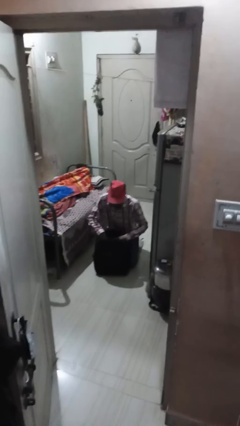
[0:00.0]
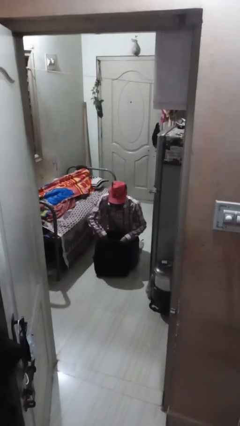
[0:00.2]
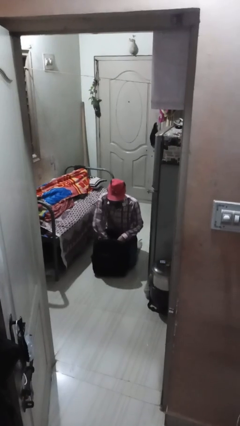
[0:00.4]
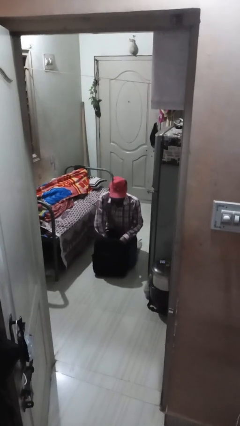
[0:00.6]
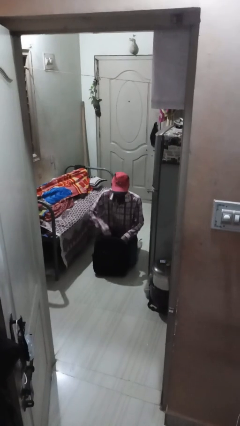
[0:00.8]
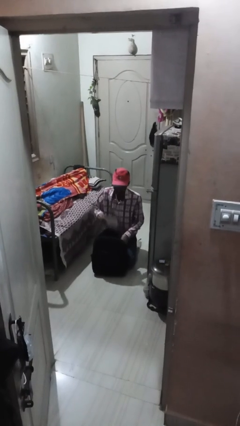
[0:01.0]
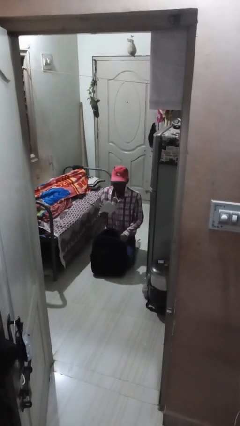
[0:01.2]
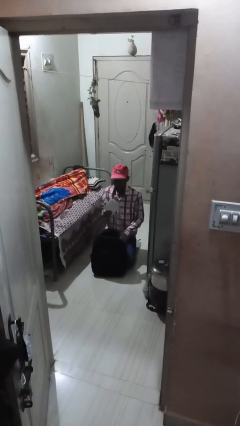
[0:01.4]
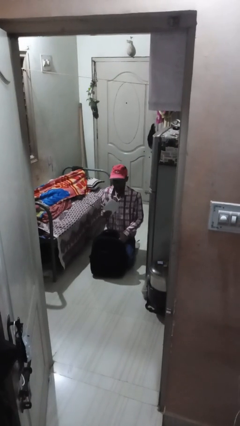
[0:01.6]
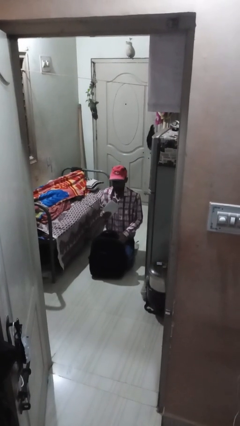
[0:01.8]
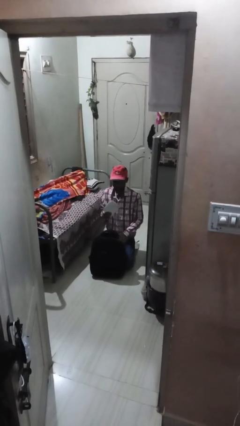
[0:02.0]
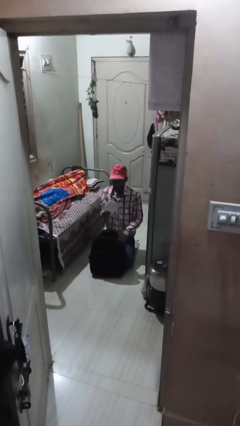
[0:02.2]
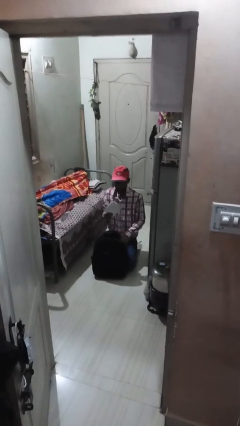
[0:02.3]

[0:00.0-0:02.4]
person takes object from backpack

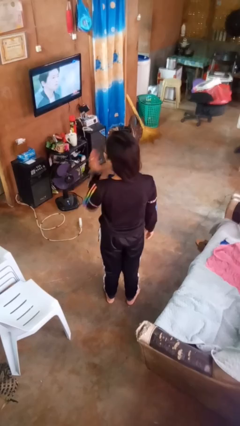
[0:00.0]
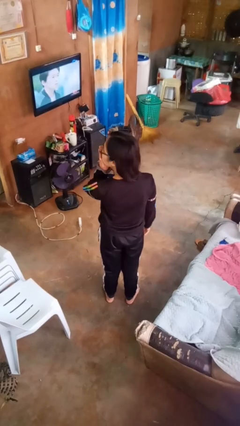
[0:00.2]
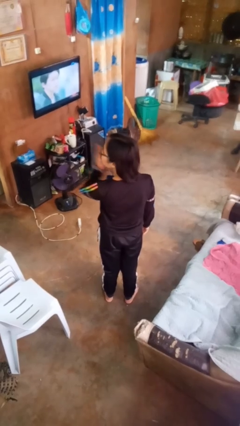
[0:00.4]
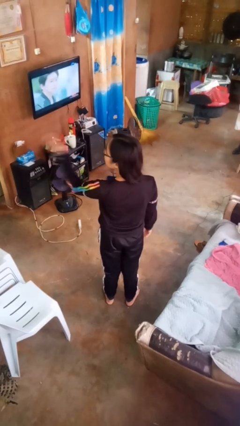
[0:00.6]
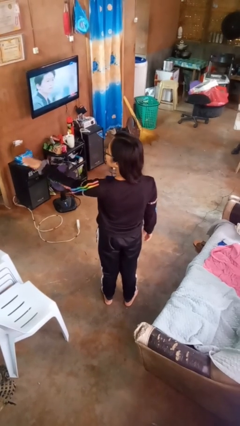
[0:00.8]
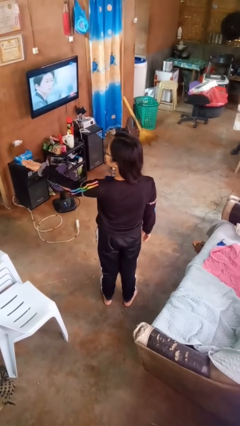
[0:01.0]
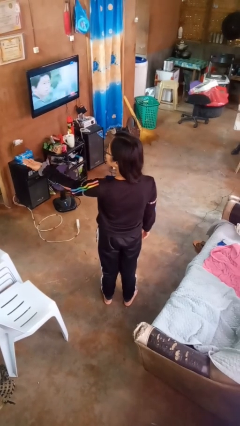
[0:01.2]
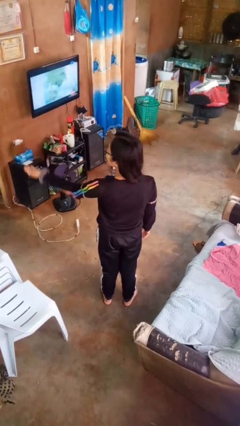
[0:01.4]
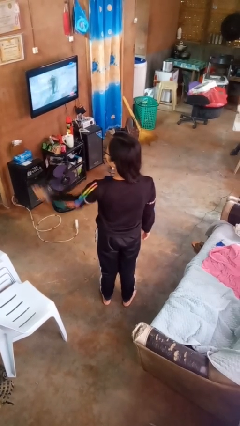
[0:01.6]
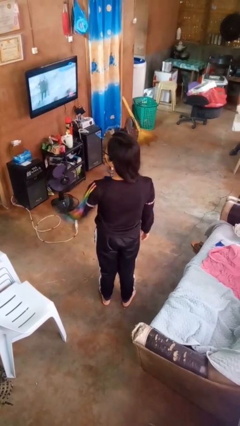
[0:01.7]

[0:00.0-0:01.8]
person gestures blow kiss

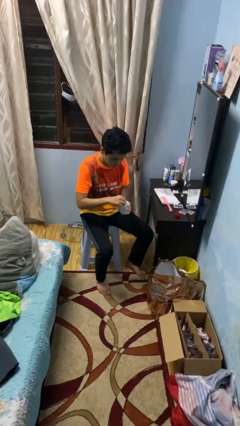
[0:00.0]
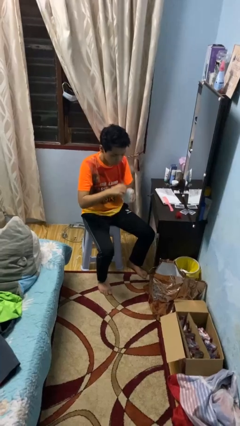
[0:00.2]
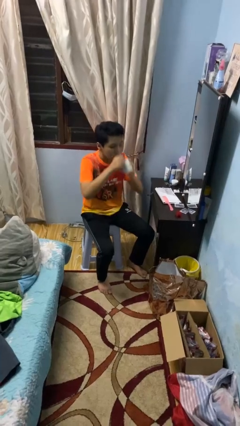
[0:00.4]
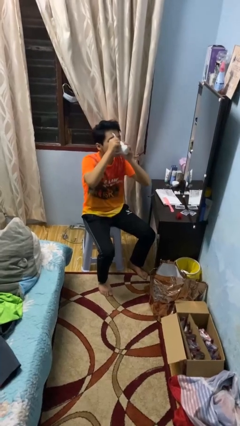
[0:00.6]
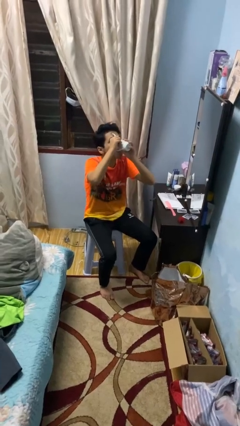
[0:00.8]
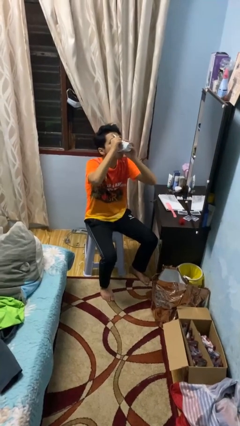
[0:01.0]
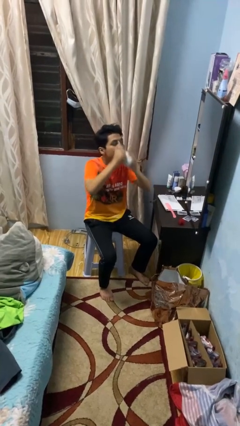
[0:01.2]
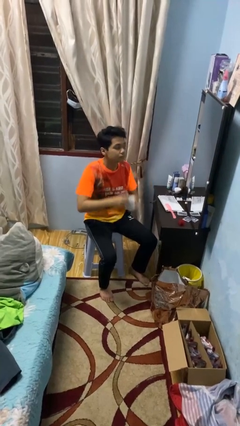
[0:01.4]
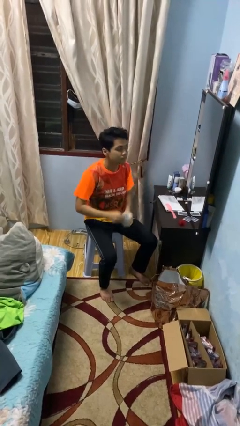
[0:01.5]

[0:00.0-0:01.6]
person drinks from mug

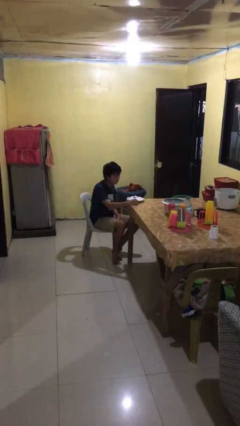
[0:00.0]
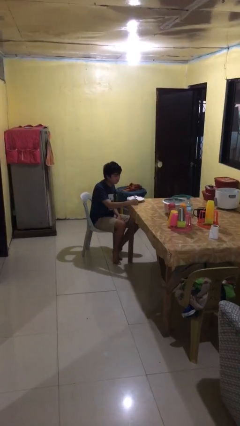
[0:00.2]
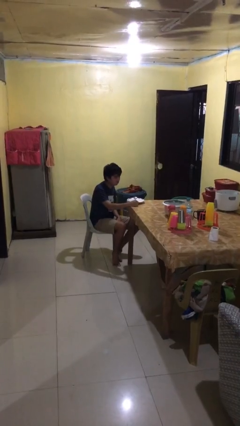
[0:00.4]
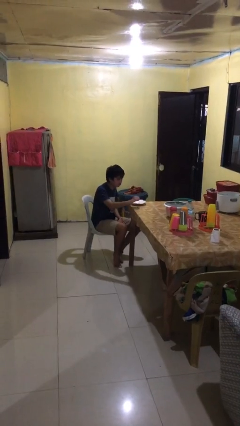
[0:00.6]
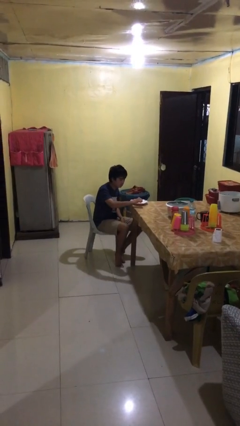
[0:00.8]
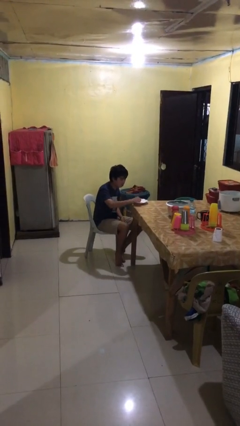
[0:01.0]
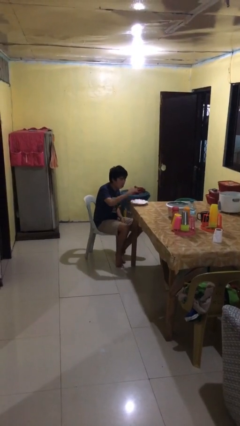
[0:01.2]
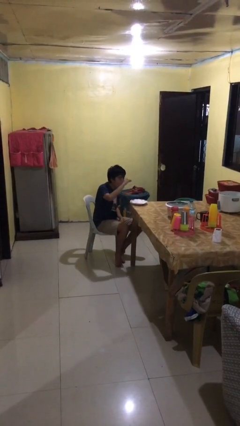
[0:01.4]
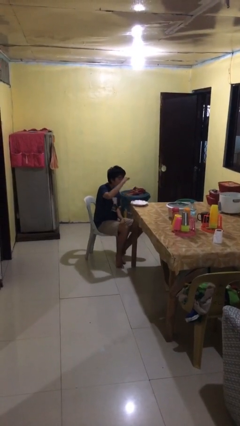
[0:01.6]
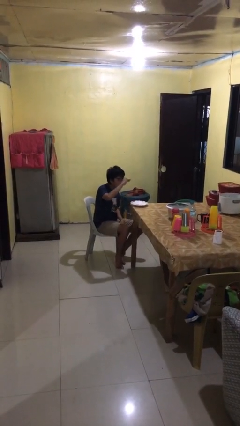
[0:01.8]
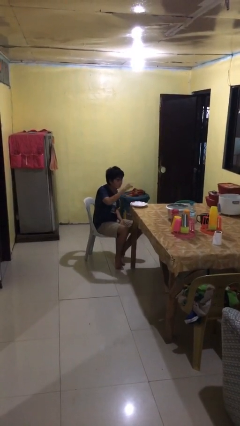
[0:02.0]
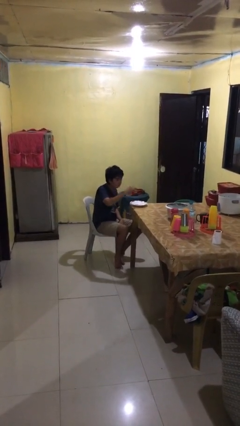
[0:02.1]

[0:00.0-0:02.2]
person eats with utensil

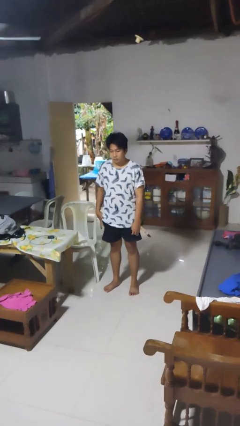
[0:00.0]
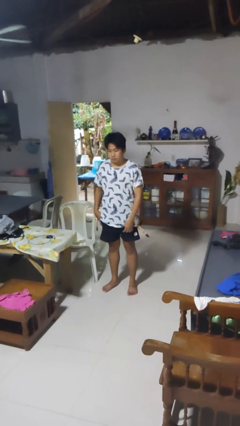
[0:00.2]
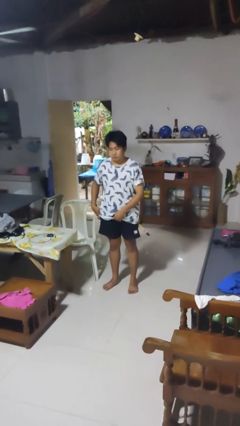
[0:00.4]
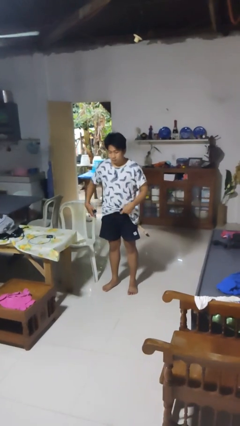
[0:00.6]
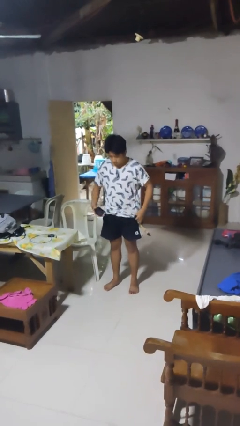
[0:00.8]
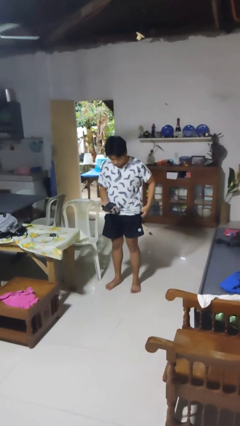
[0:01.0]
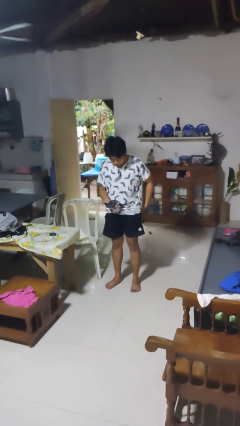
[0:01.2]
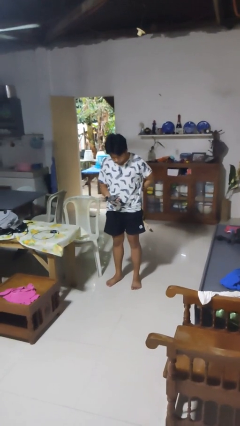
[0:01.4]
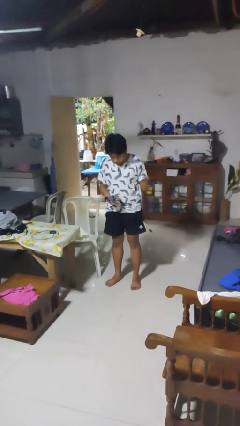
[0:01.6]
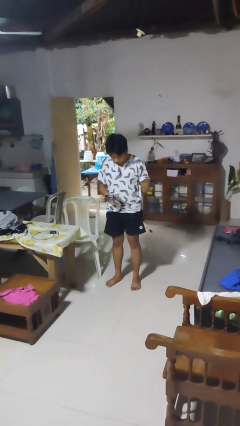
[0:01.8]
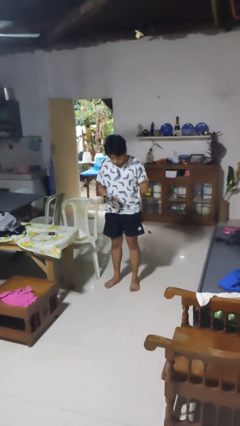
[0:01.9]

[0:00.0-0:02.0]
person takes phone from pocket

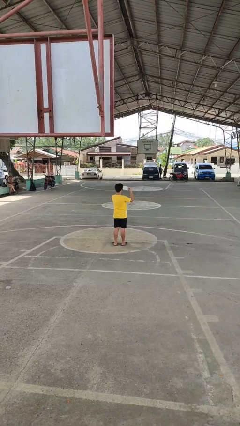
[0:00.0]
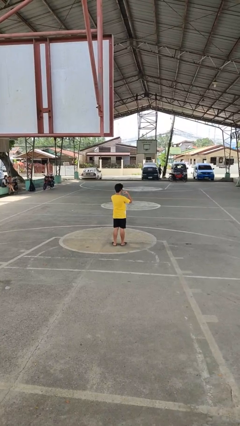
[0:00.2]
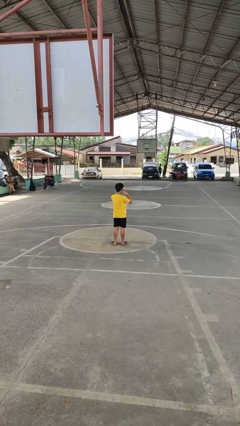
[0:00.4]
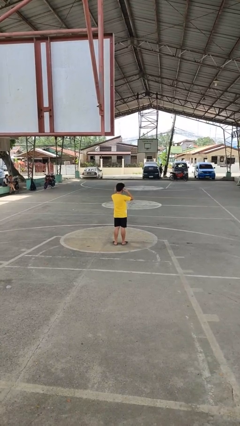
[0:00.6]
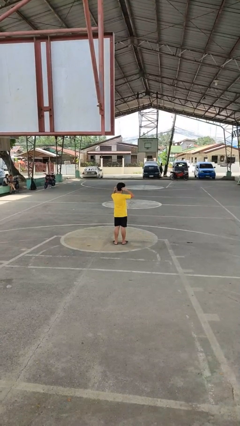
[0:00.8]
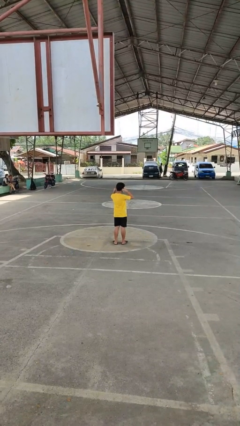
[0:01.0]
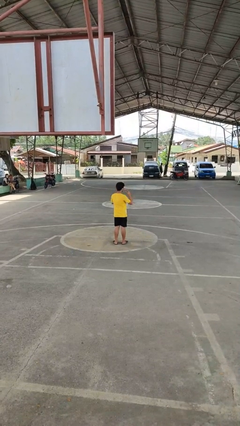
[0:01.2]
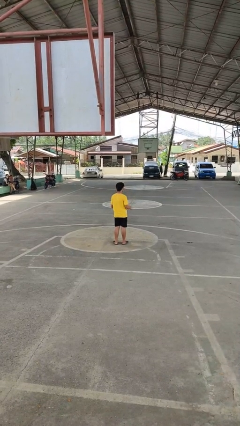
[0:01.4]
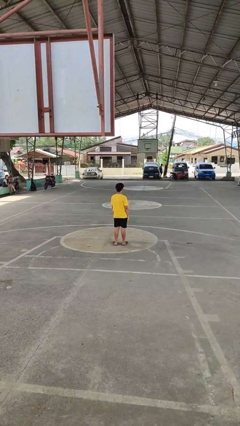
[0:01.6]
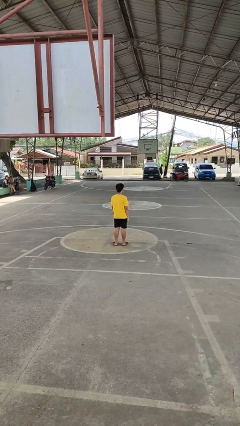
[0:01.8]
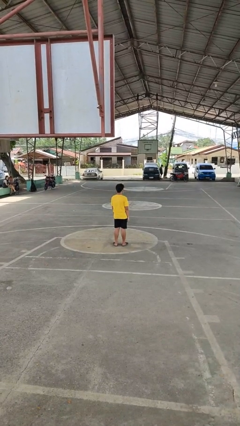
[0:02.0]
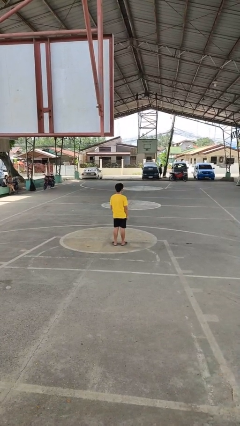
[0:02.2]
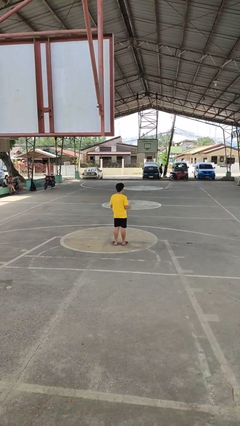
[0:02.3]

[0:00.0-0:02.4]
person puts on facemask

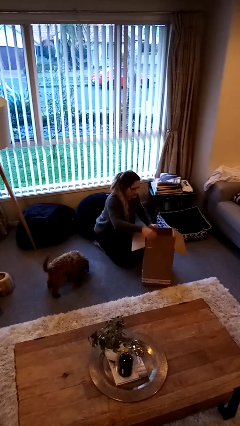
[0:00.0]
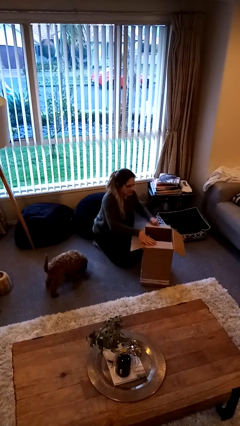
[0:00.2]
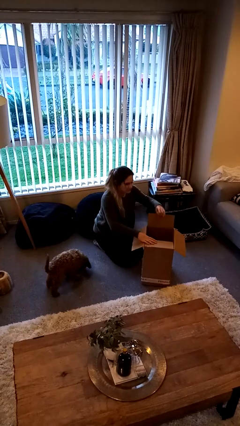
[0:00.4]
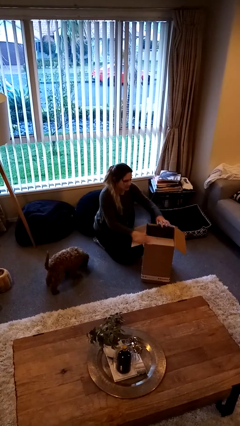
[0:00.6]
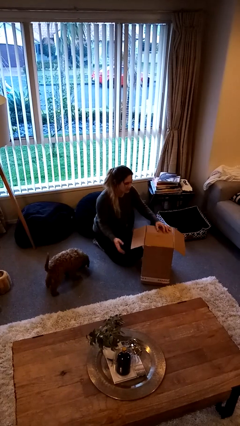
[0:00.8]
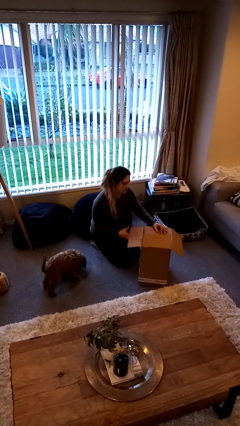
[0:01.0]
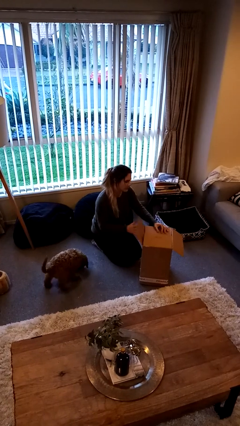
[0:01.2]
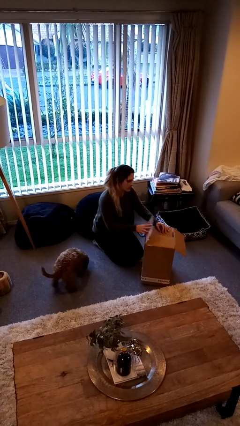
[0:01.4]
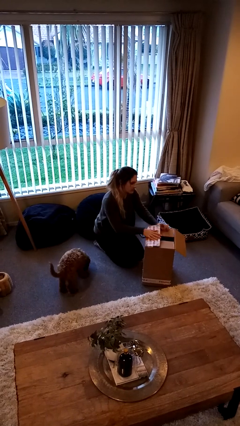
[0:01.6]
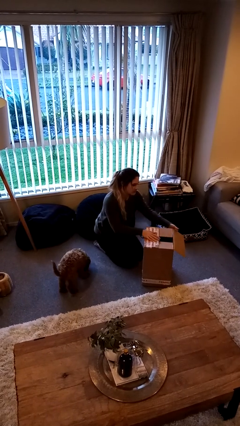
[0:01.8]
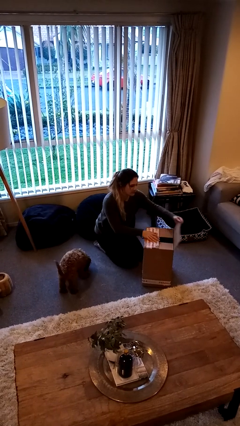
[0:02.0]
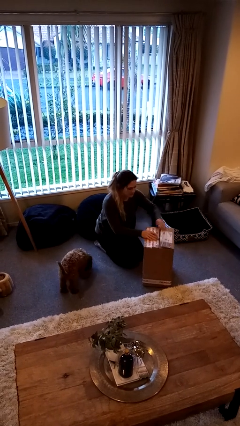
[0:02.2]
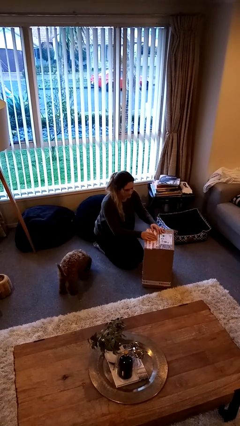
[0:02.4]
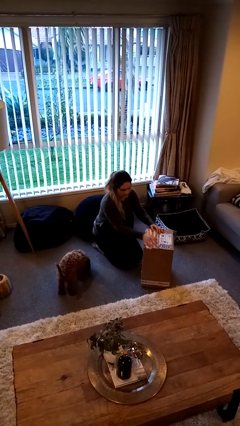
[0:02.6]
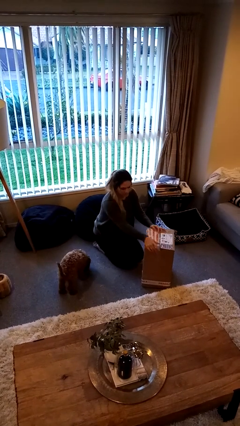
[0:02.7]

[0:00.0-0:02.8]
person closes box

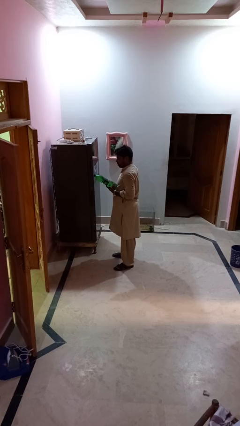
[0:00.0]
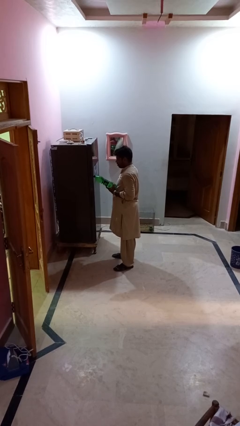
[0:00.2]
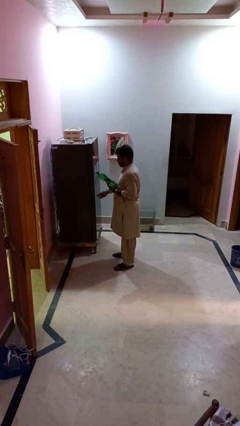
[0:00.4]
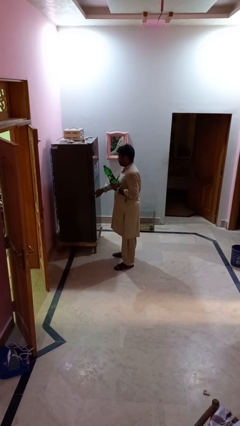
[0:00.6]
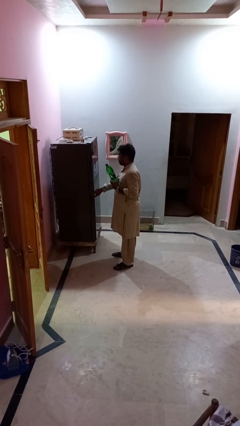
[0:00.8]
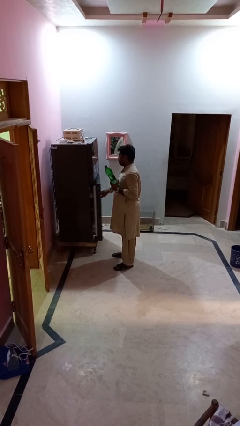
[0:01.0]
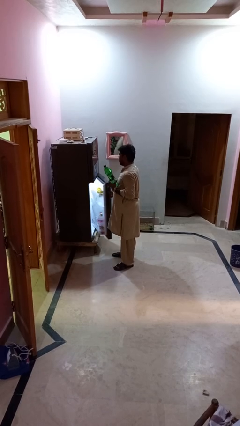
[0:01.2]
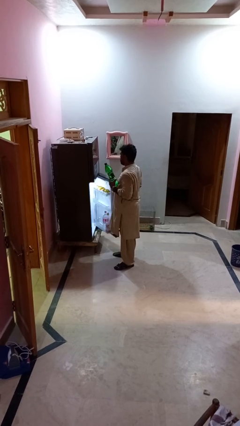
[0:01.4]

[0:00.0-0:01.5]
person opens refrigerator
